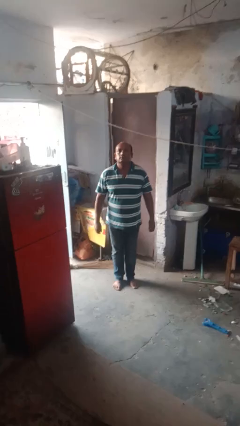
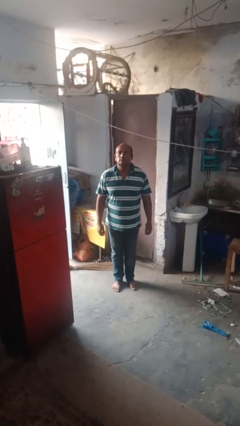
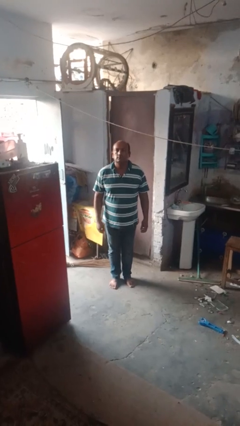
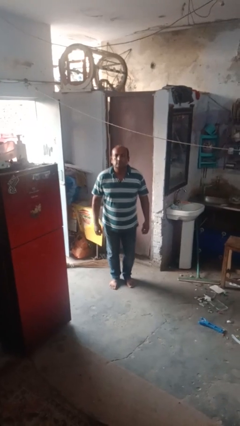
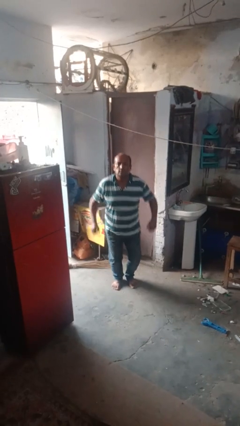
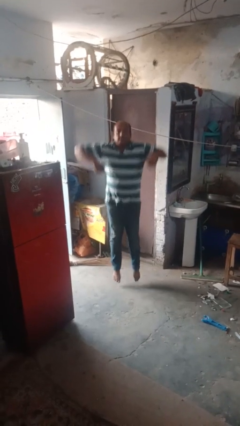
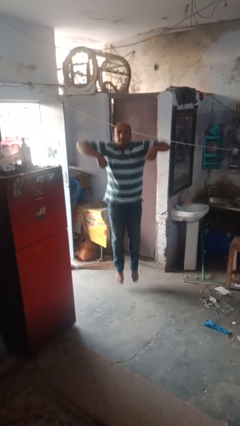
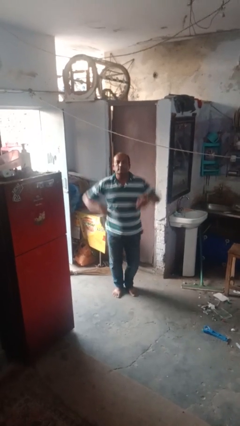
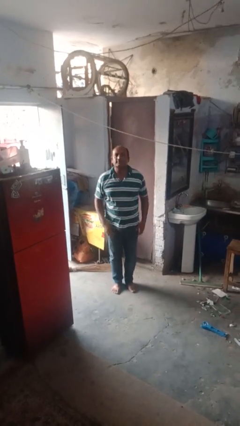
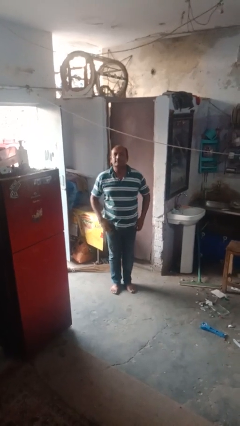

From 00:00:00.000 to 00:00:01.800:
person jumps

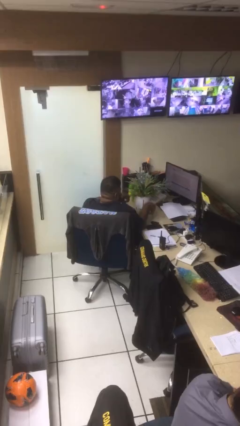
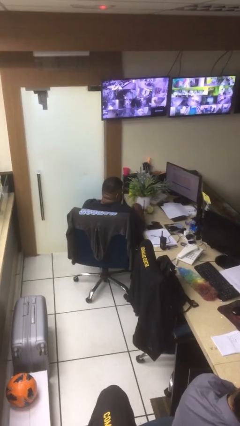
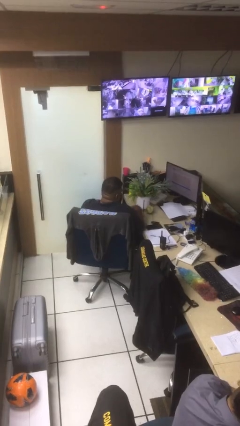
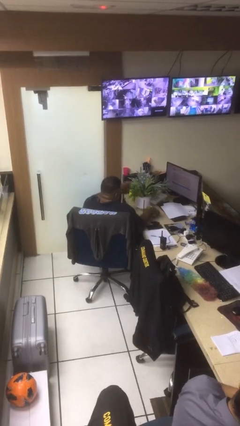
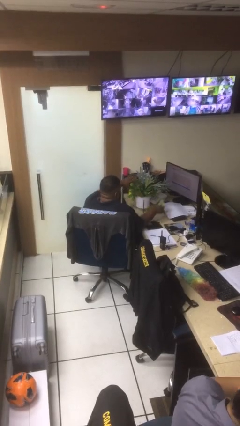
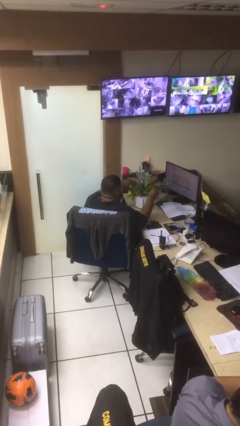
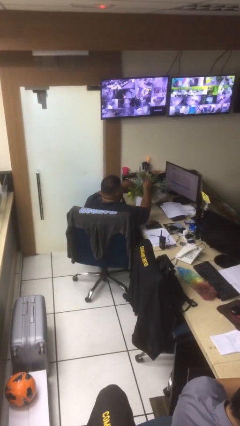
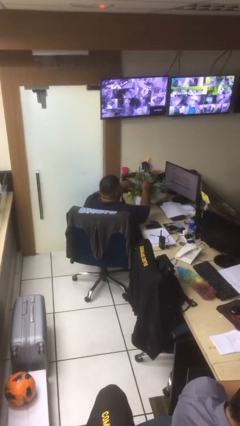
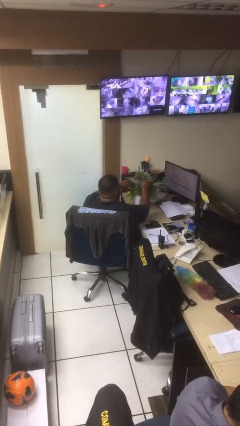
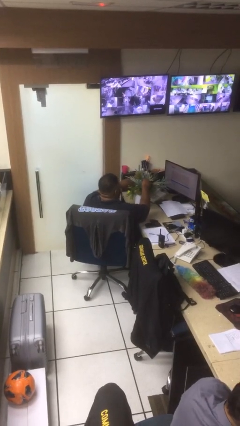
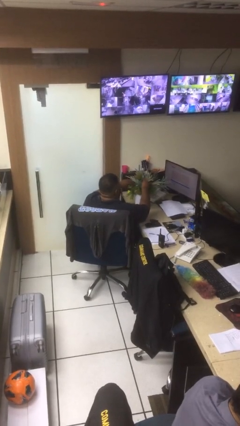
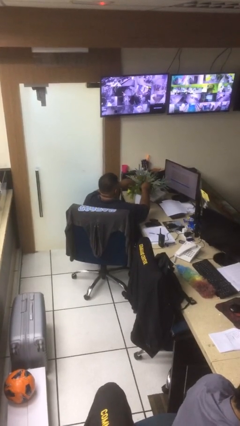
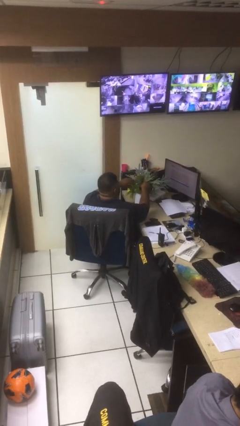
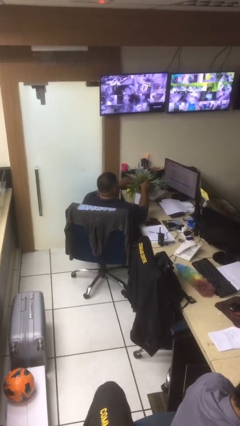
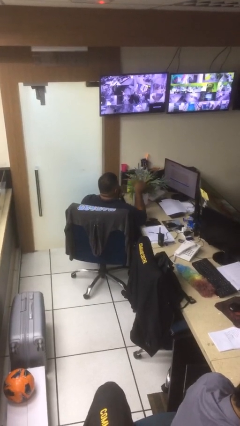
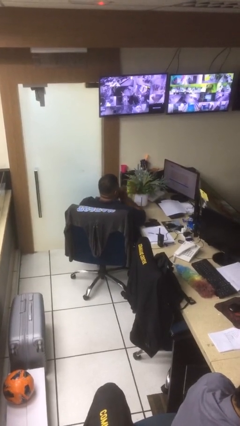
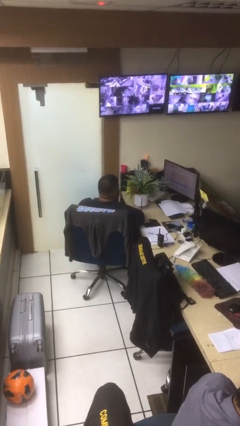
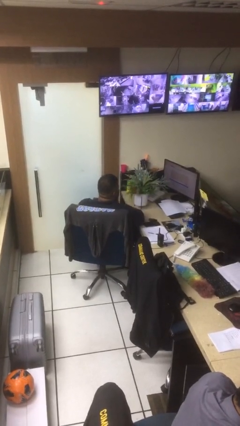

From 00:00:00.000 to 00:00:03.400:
person arranges flowers in vase

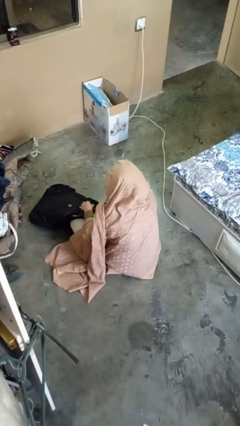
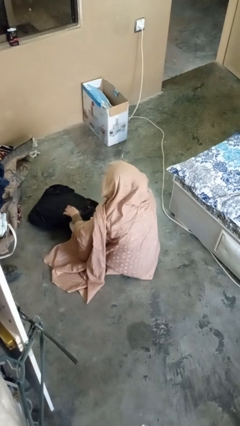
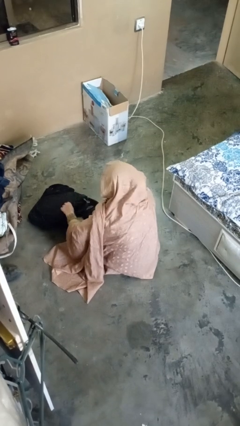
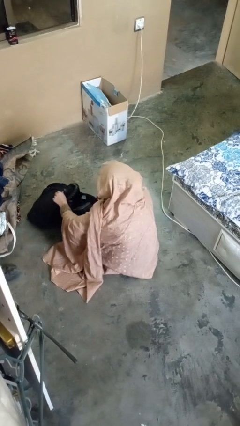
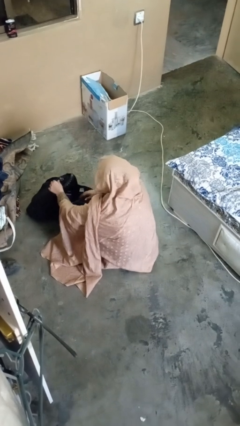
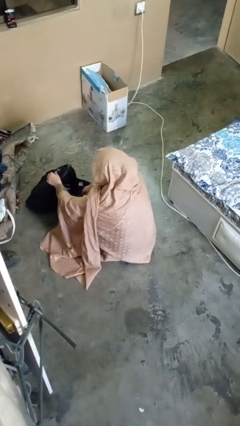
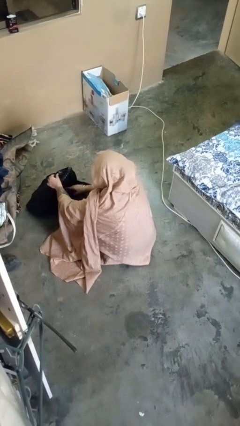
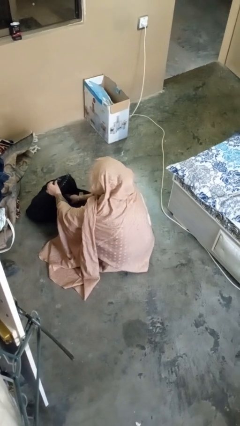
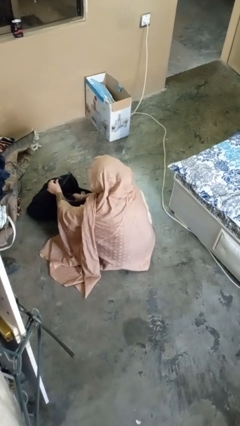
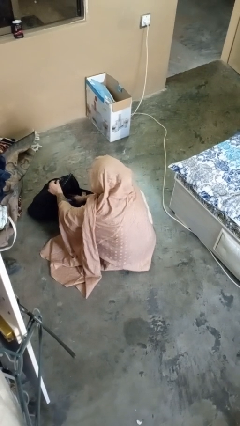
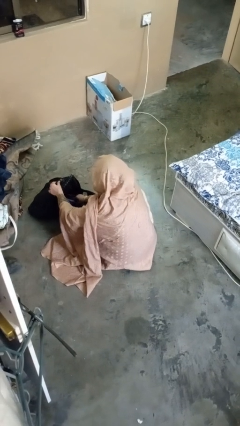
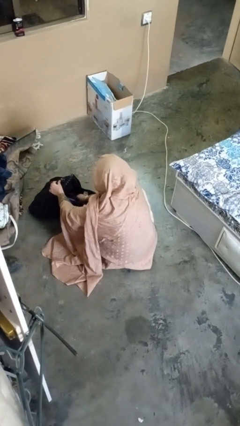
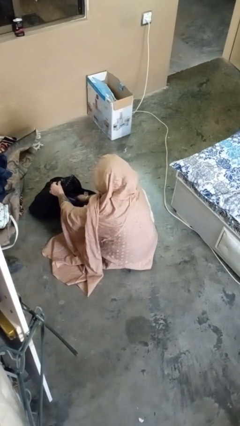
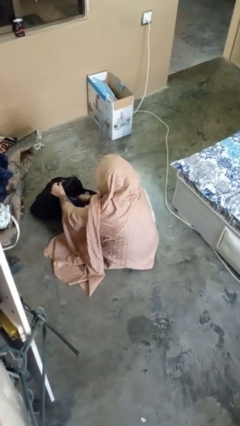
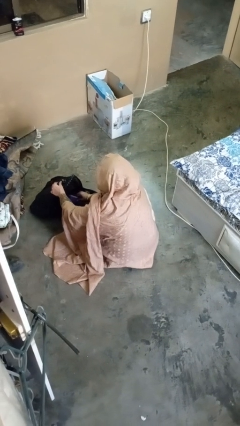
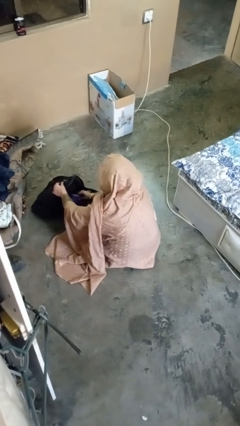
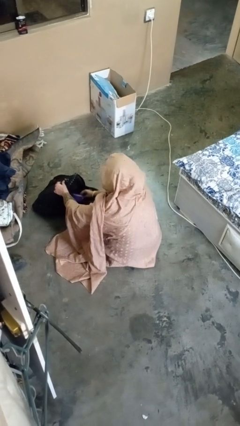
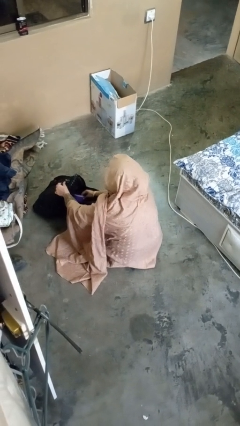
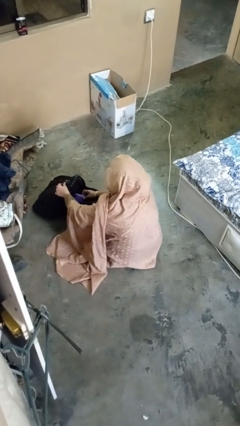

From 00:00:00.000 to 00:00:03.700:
person searches in backpack

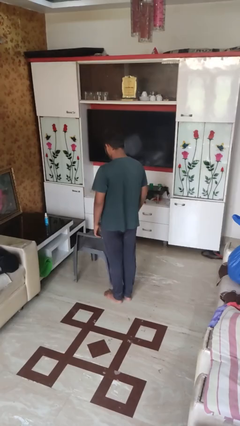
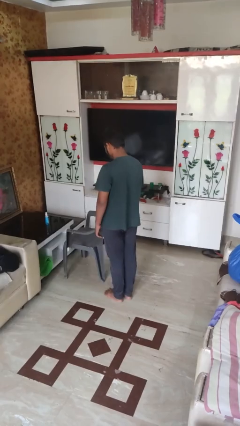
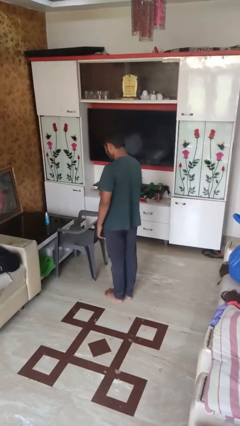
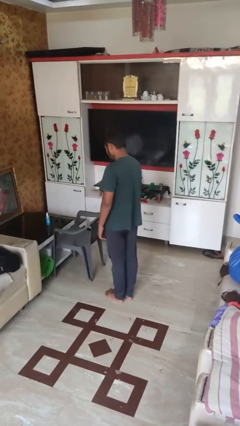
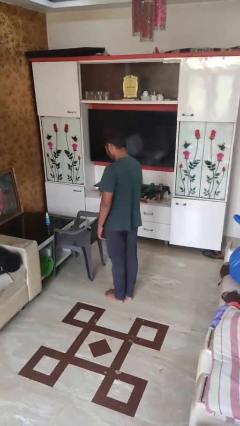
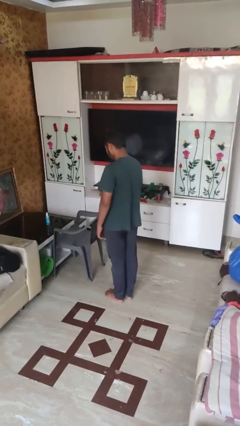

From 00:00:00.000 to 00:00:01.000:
person pushes in chair

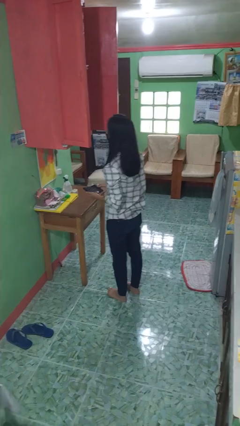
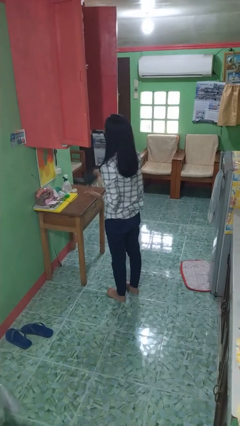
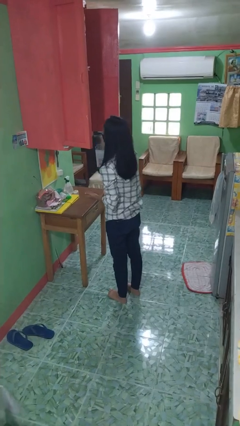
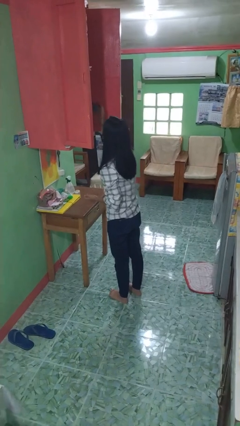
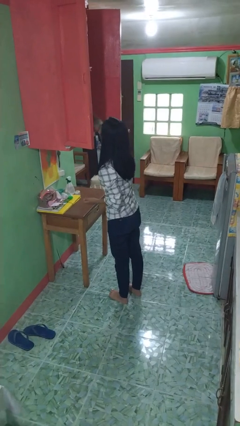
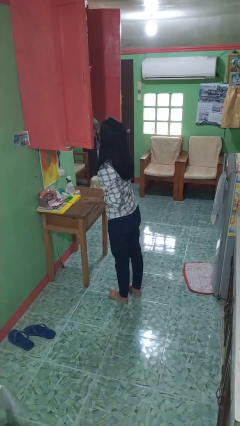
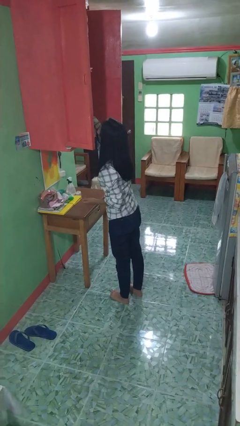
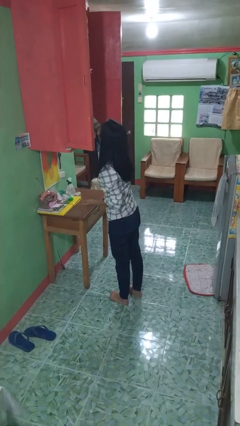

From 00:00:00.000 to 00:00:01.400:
person puts down object into cabinet

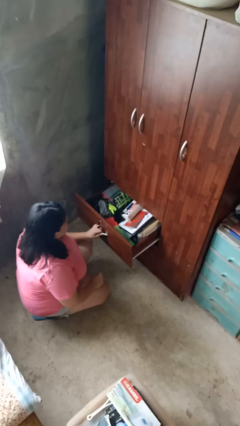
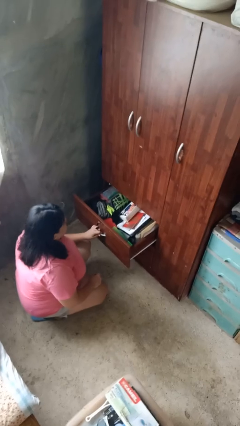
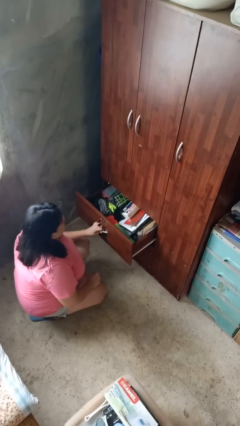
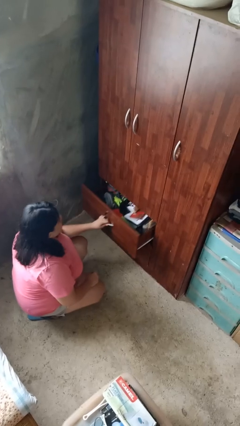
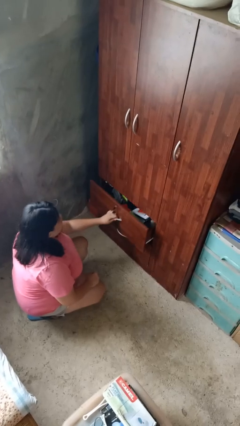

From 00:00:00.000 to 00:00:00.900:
person closes dresser drawer

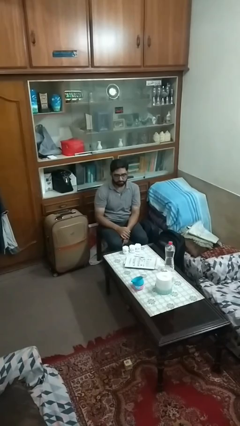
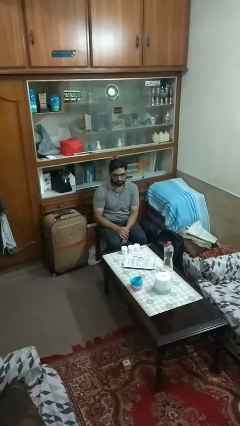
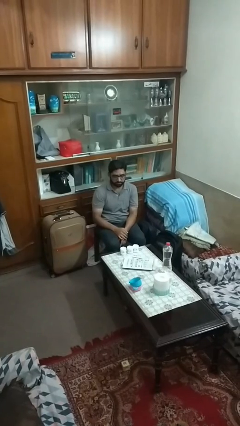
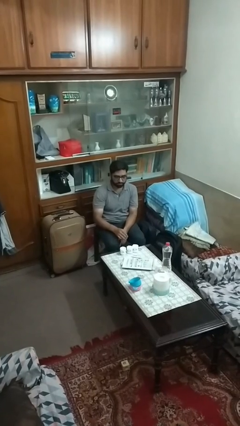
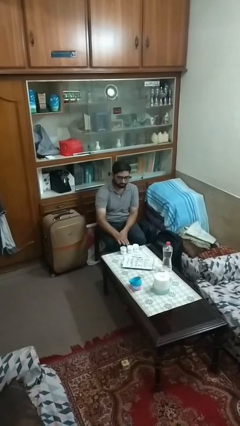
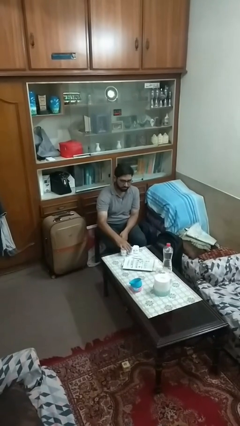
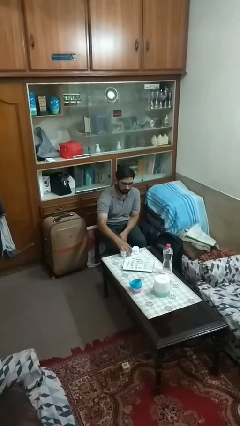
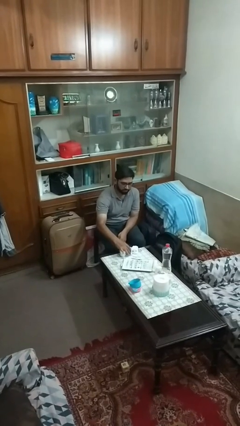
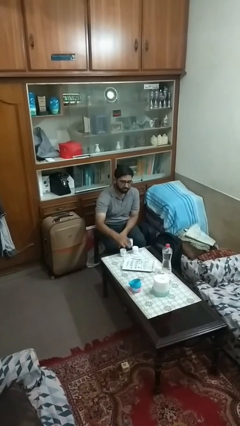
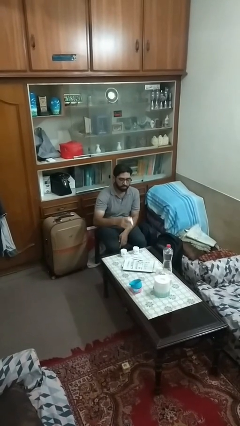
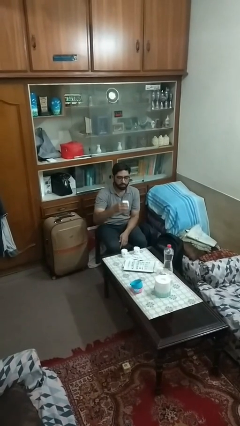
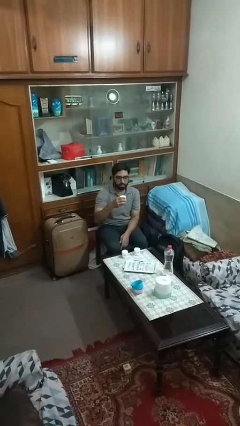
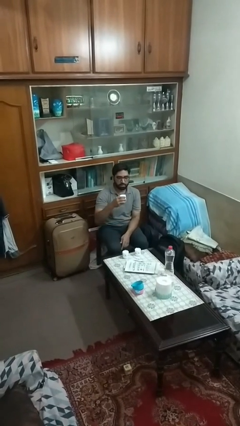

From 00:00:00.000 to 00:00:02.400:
person picks up object from table

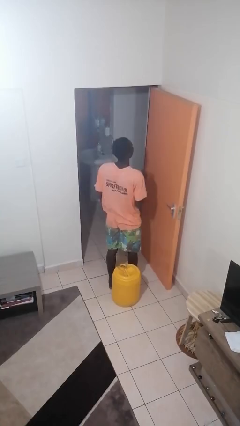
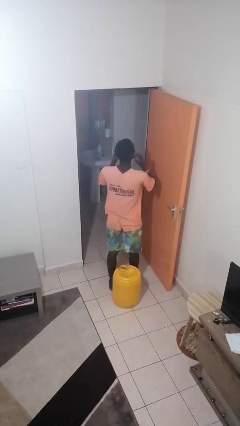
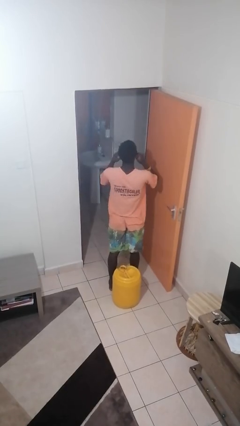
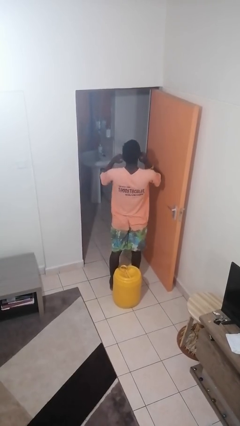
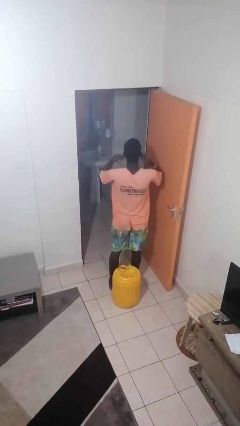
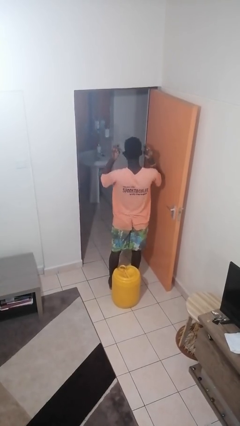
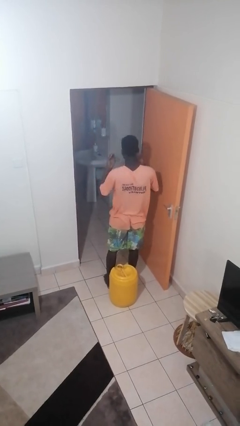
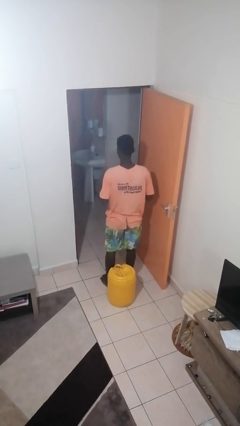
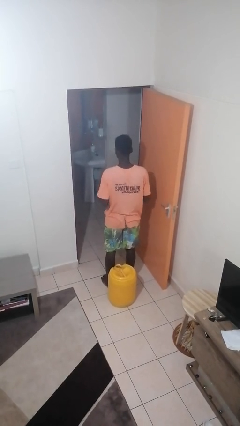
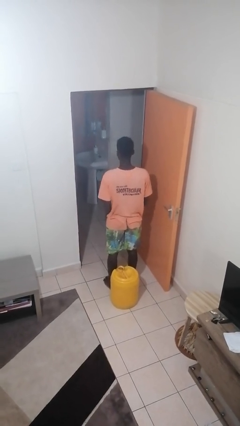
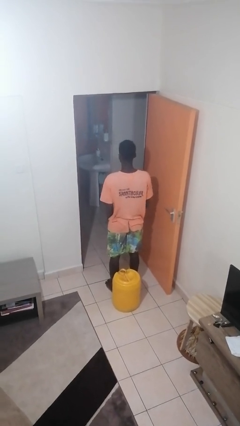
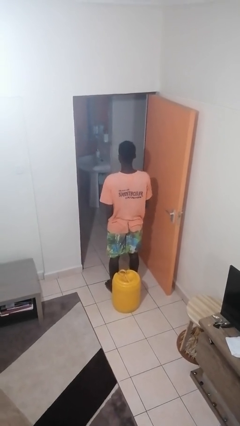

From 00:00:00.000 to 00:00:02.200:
person takes off facemask

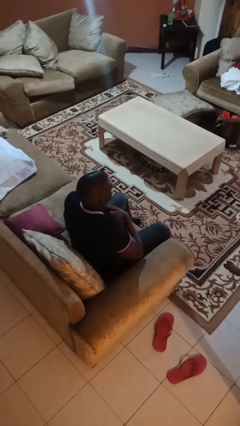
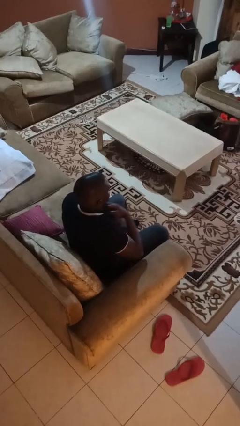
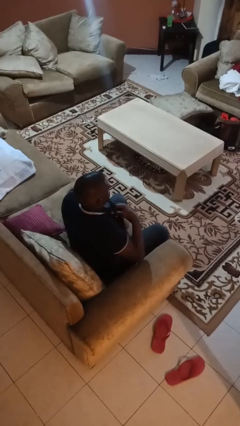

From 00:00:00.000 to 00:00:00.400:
person puts on necktie
